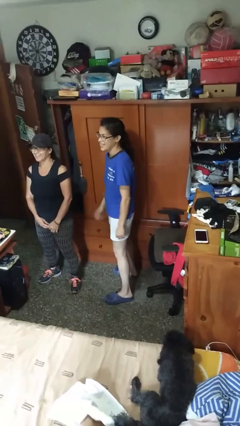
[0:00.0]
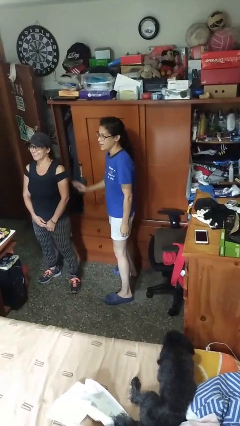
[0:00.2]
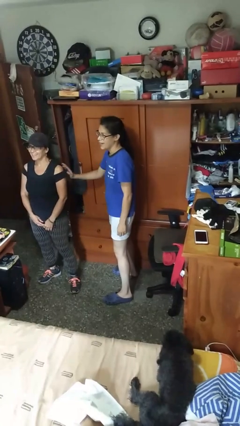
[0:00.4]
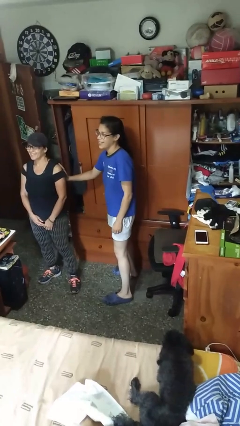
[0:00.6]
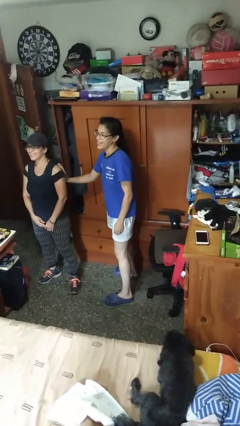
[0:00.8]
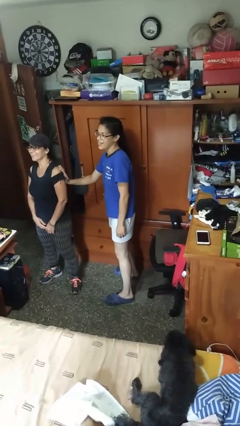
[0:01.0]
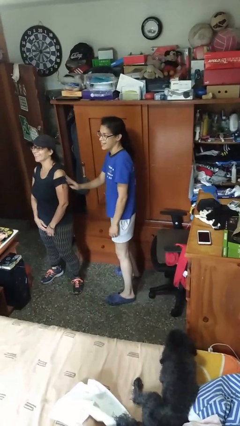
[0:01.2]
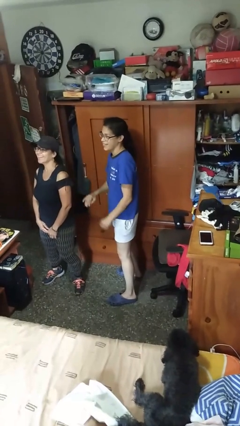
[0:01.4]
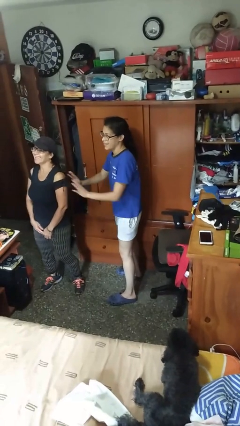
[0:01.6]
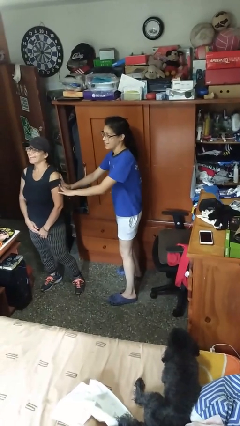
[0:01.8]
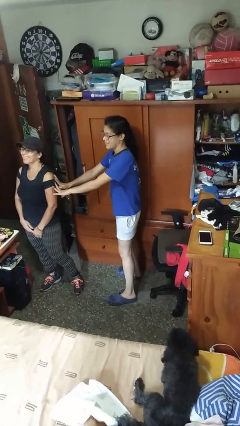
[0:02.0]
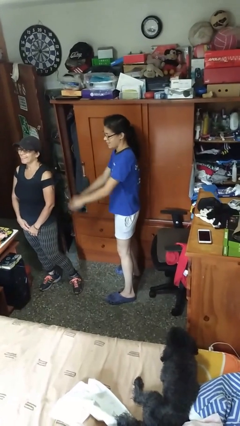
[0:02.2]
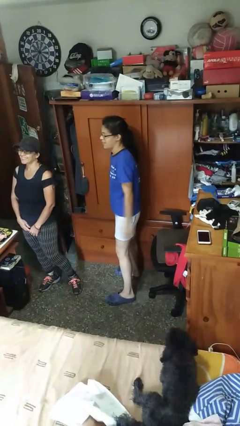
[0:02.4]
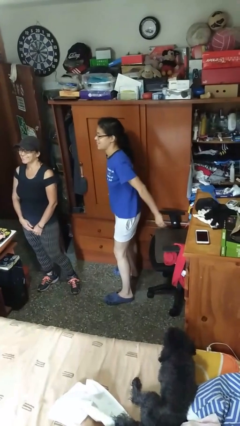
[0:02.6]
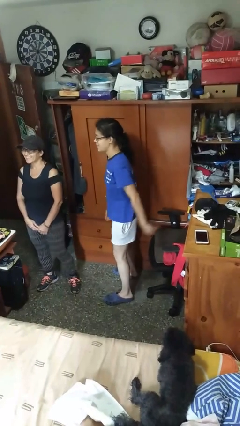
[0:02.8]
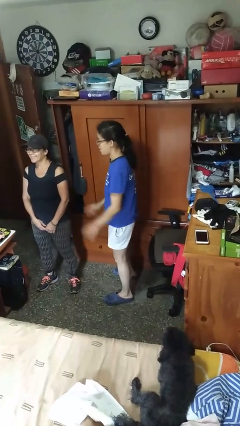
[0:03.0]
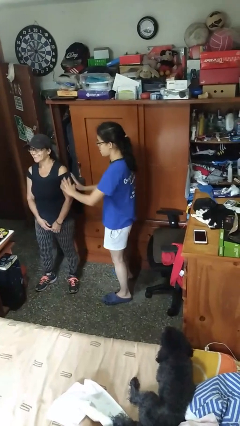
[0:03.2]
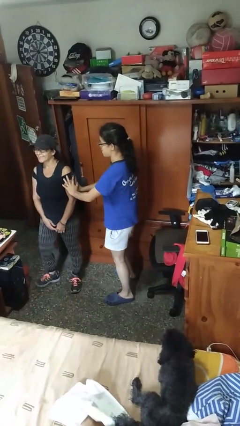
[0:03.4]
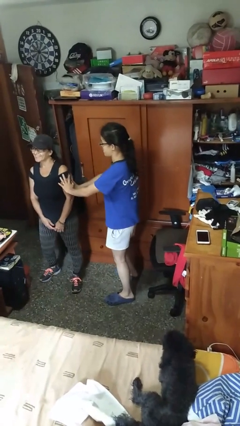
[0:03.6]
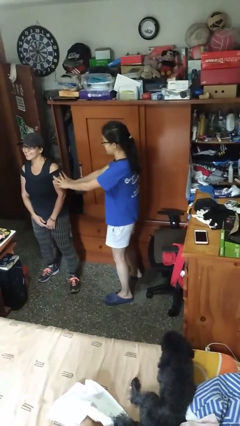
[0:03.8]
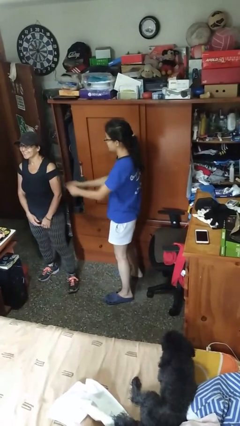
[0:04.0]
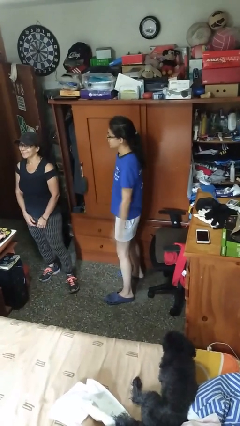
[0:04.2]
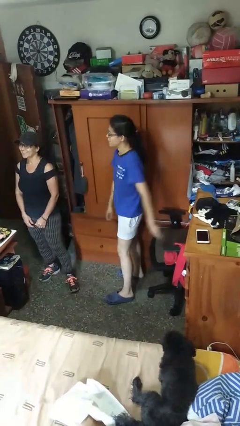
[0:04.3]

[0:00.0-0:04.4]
person shoves person

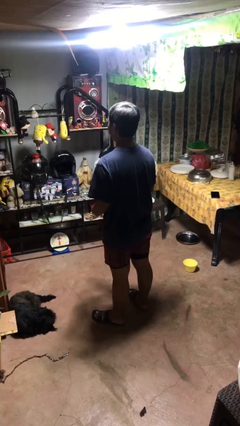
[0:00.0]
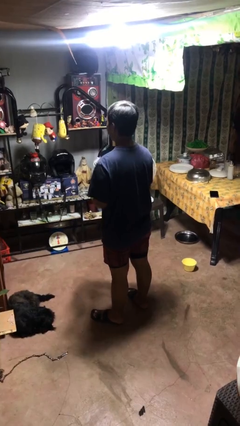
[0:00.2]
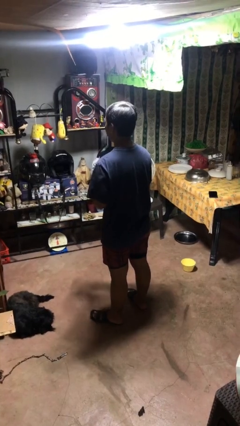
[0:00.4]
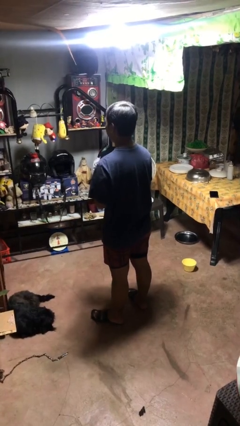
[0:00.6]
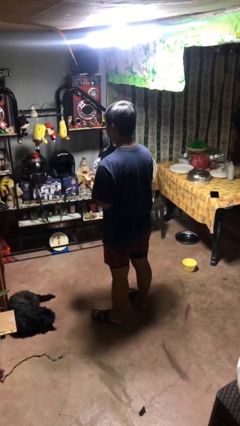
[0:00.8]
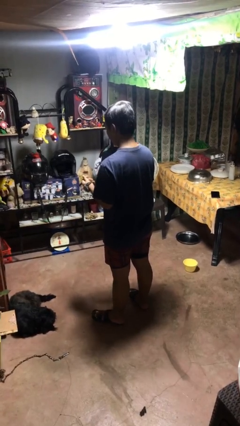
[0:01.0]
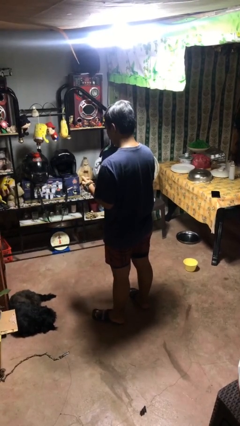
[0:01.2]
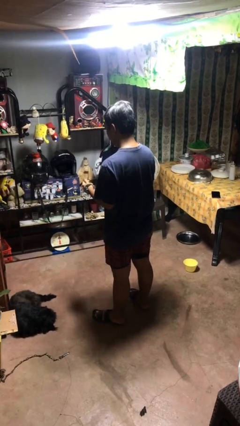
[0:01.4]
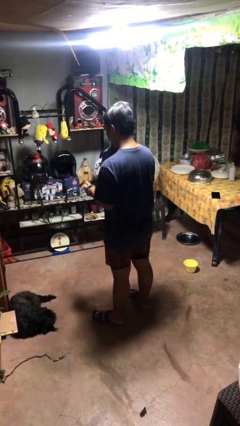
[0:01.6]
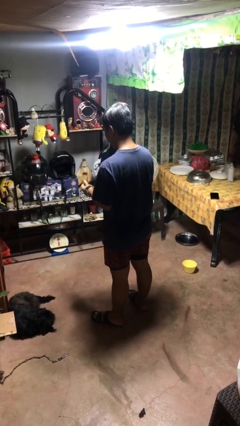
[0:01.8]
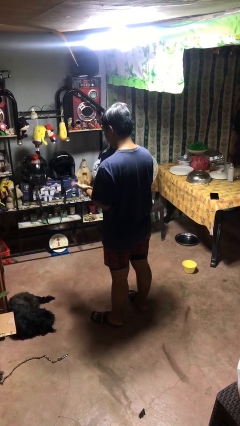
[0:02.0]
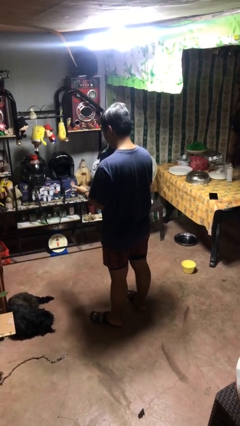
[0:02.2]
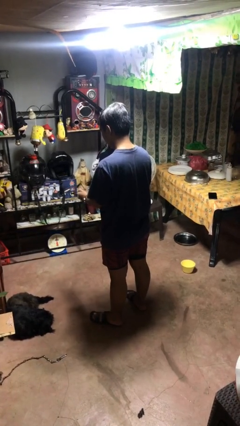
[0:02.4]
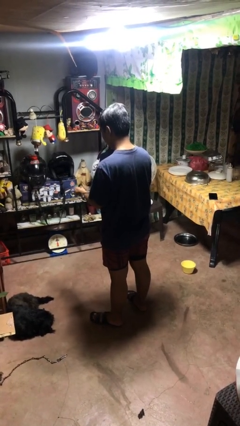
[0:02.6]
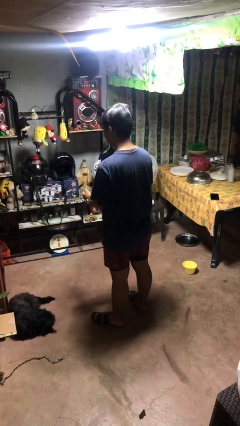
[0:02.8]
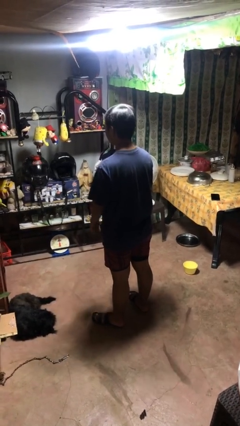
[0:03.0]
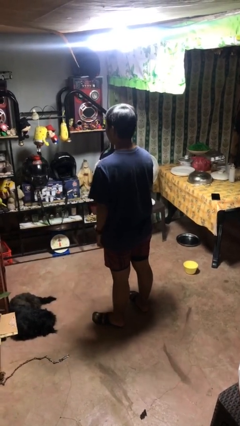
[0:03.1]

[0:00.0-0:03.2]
person puts on wristwatch

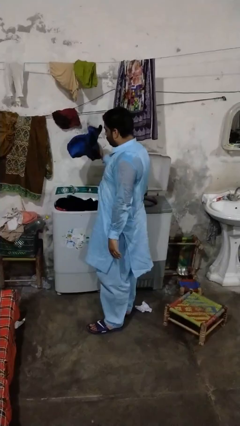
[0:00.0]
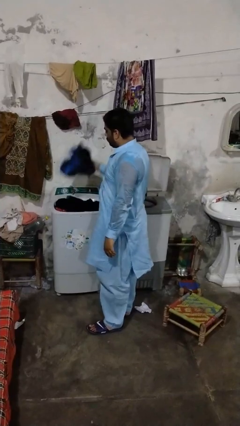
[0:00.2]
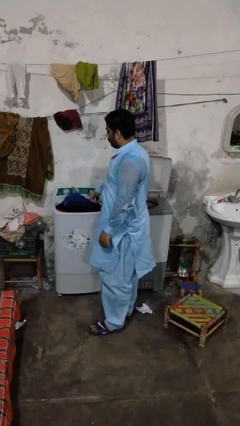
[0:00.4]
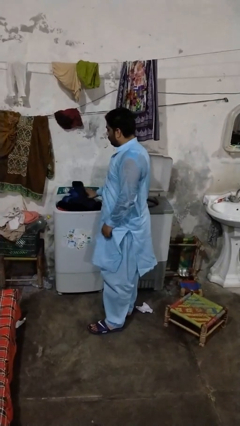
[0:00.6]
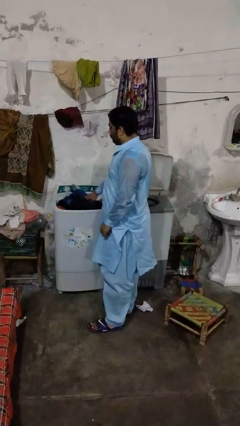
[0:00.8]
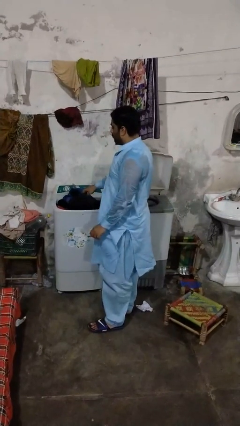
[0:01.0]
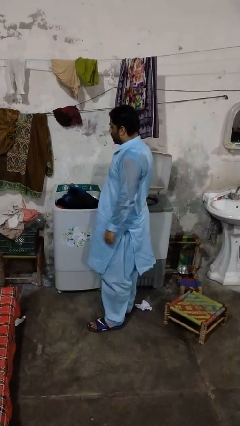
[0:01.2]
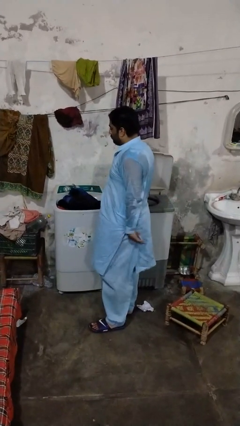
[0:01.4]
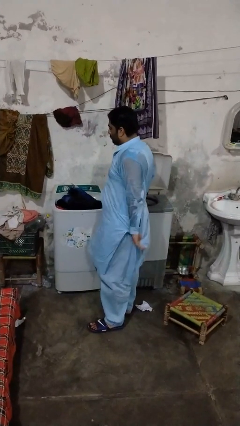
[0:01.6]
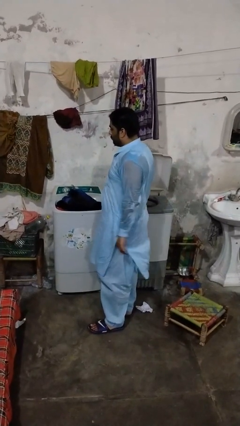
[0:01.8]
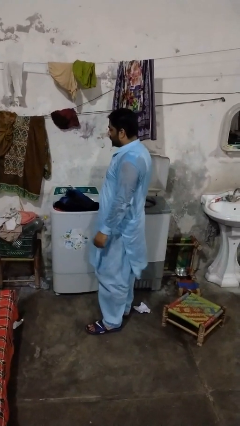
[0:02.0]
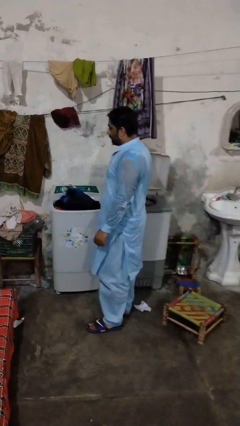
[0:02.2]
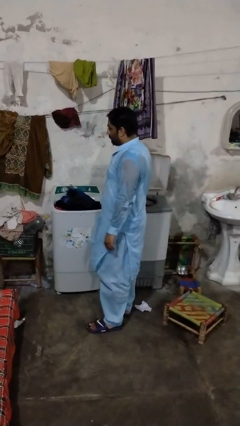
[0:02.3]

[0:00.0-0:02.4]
person loads clotheswasher

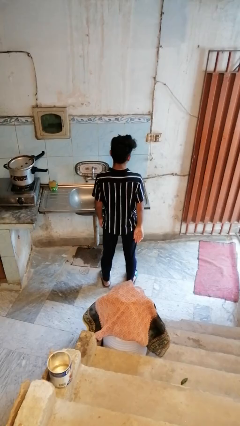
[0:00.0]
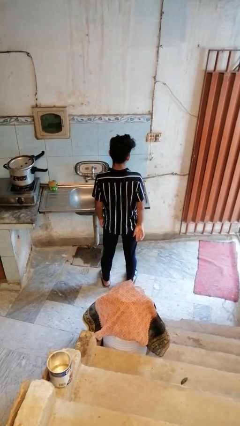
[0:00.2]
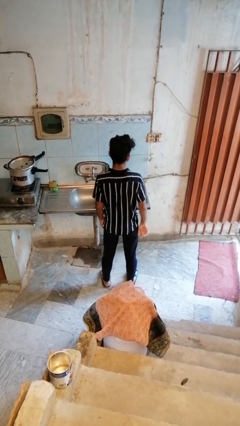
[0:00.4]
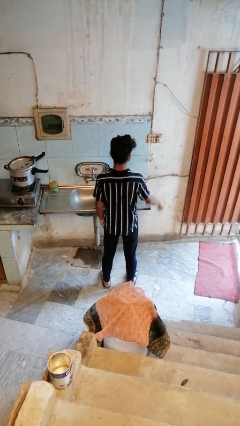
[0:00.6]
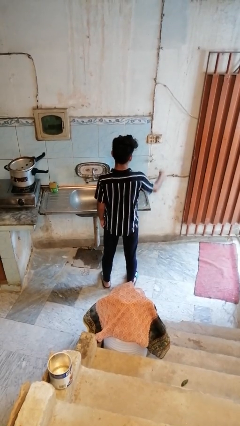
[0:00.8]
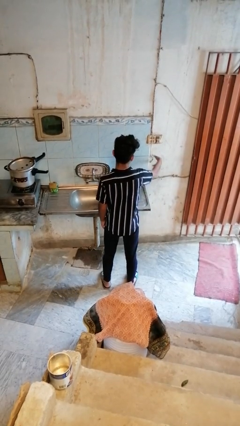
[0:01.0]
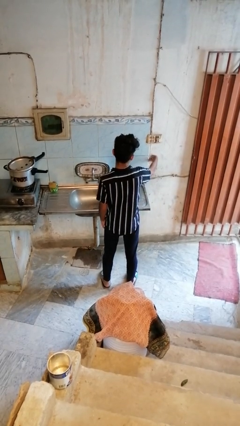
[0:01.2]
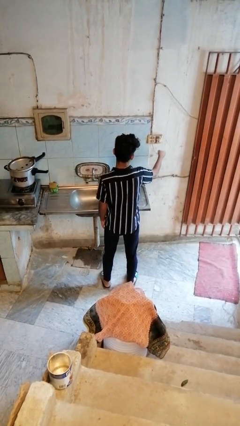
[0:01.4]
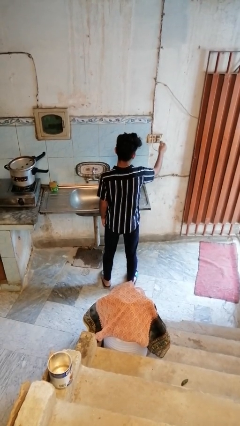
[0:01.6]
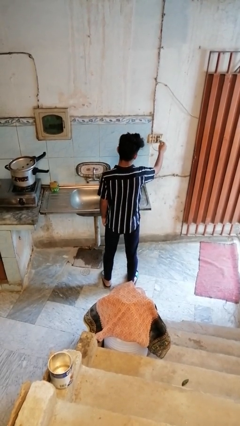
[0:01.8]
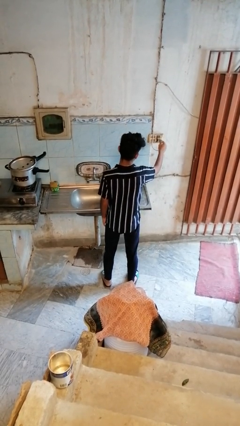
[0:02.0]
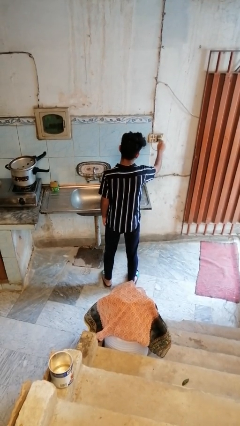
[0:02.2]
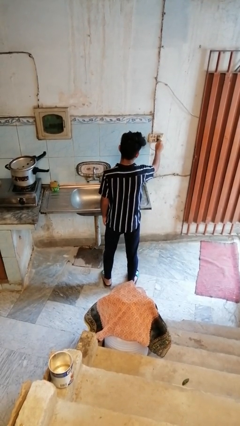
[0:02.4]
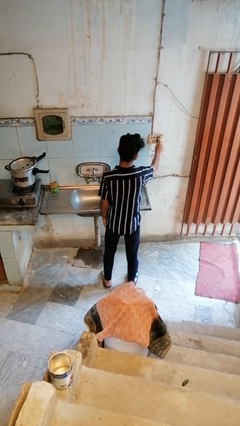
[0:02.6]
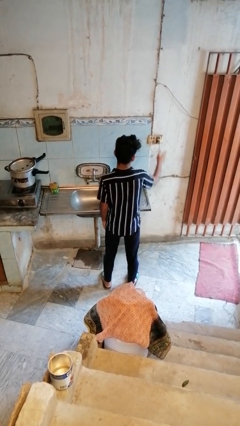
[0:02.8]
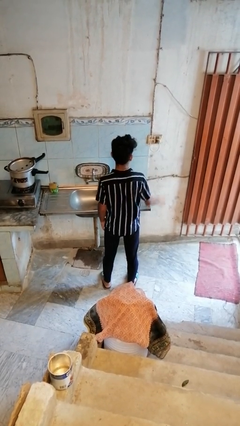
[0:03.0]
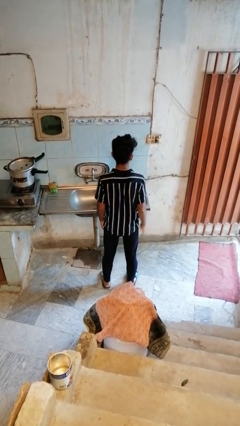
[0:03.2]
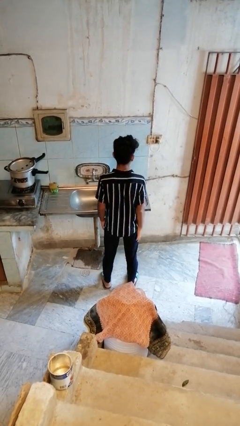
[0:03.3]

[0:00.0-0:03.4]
person plugs into electrical socket

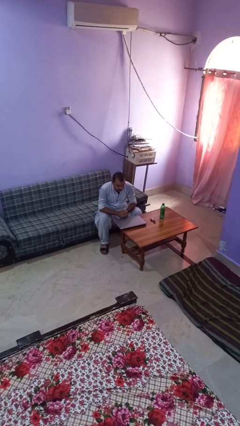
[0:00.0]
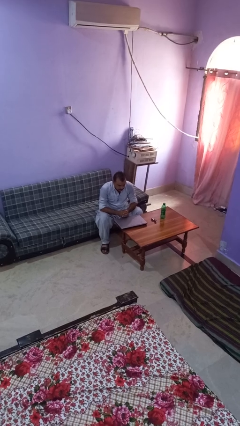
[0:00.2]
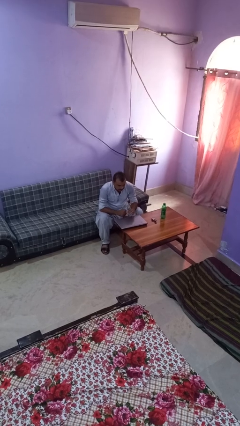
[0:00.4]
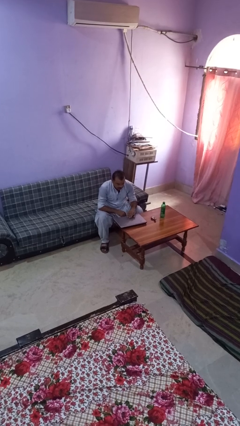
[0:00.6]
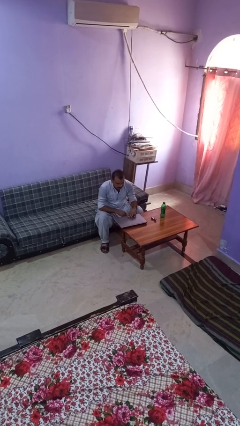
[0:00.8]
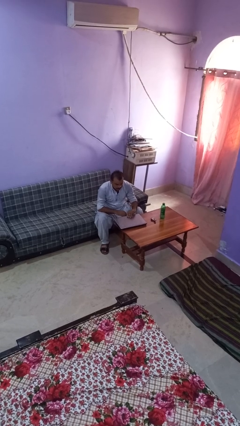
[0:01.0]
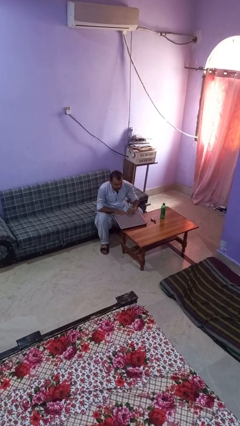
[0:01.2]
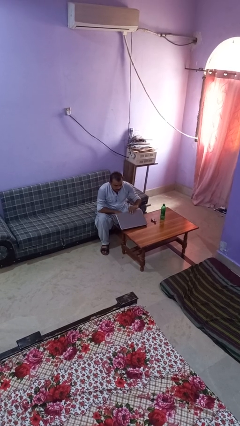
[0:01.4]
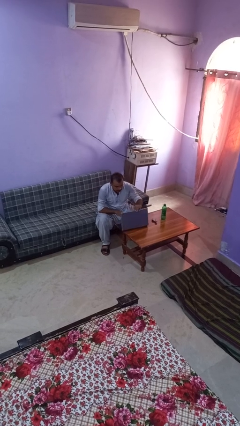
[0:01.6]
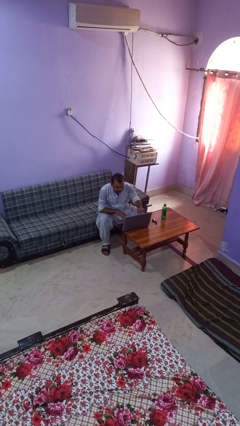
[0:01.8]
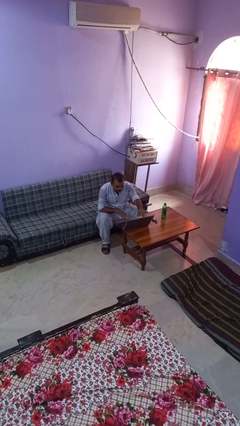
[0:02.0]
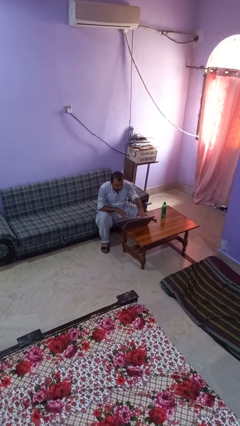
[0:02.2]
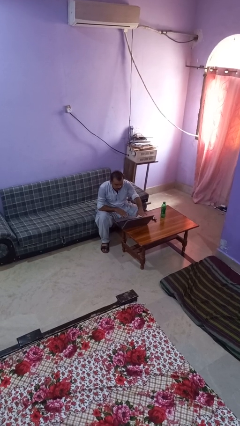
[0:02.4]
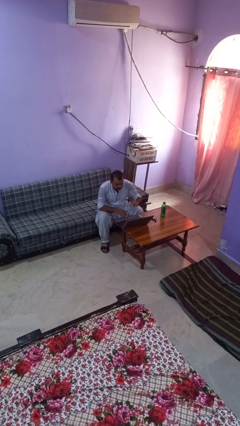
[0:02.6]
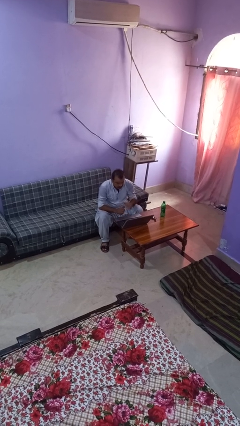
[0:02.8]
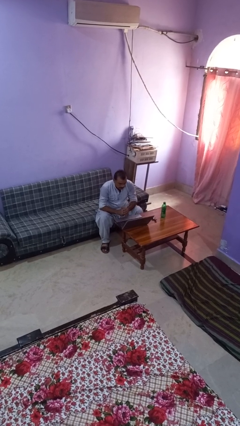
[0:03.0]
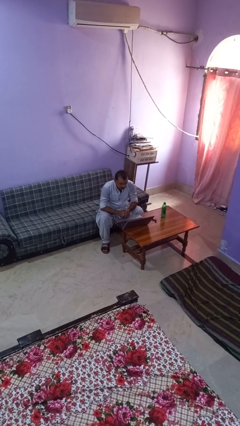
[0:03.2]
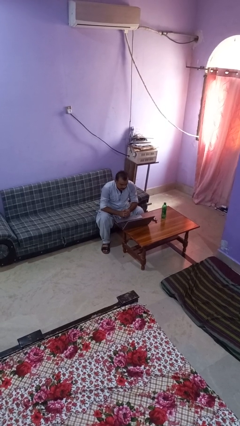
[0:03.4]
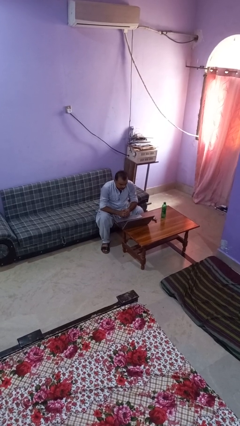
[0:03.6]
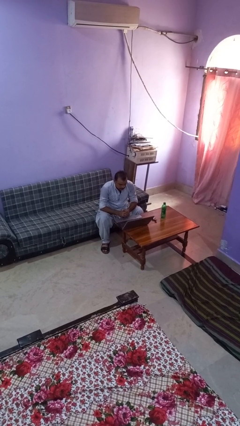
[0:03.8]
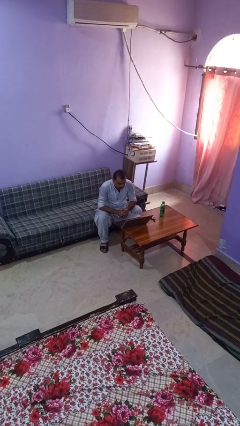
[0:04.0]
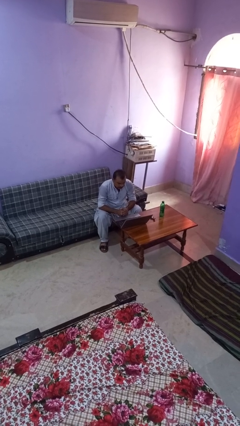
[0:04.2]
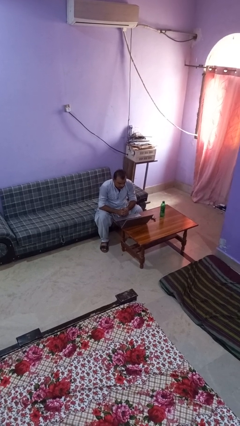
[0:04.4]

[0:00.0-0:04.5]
person opens laptop
